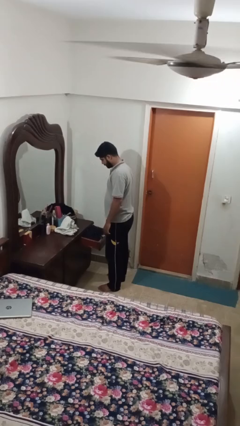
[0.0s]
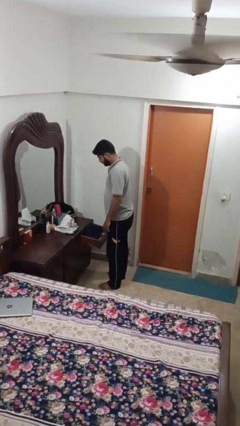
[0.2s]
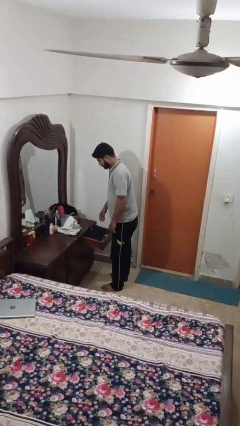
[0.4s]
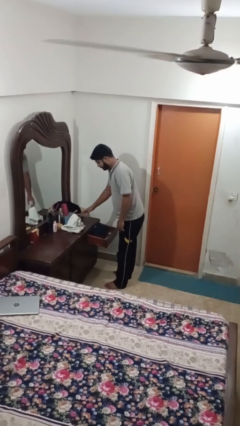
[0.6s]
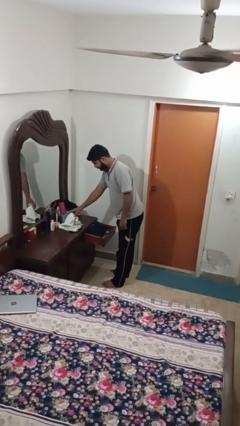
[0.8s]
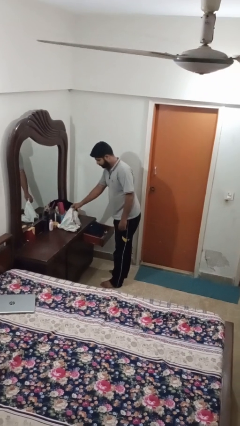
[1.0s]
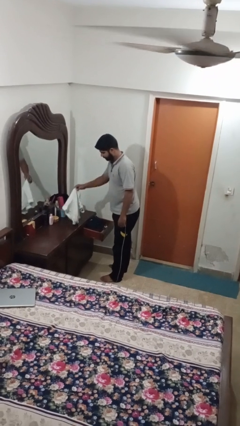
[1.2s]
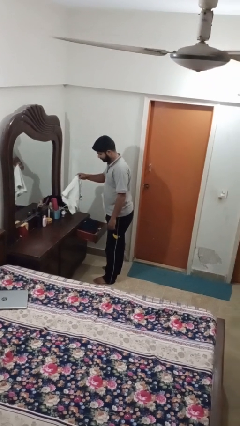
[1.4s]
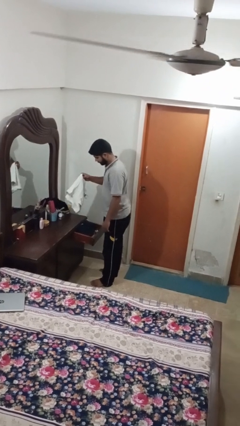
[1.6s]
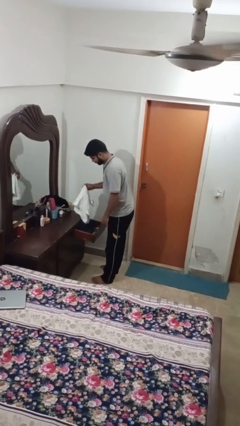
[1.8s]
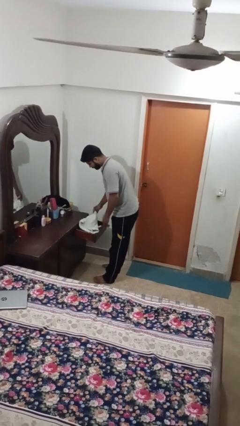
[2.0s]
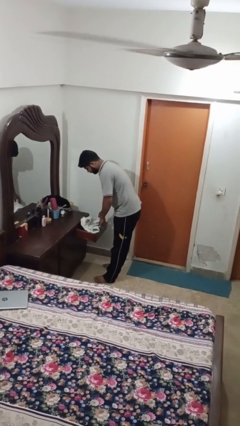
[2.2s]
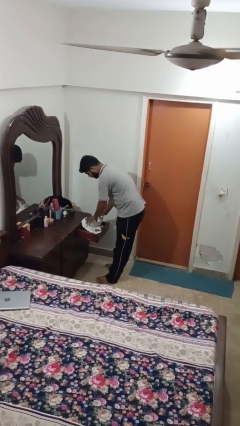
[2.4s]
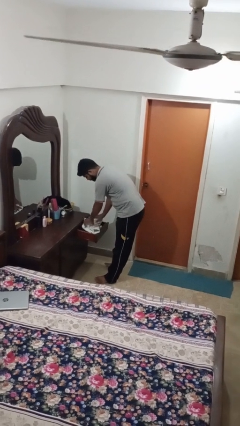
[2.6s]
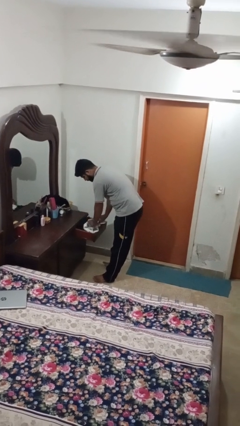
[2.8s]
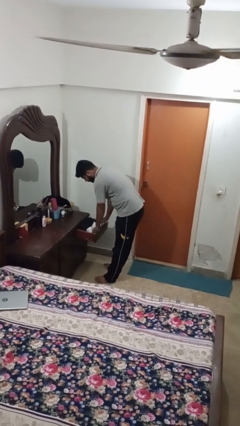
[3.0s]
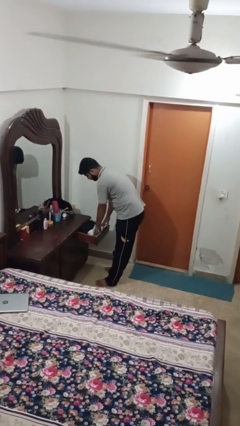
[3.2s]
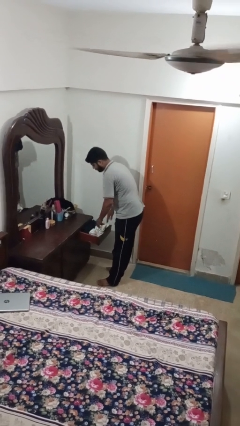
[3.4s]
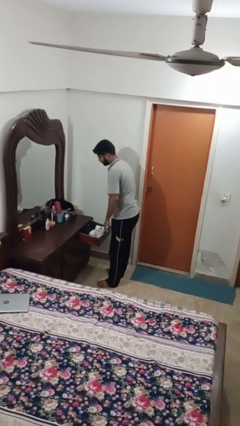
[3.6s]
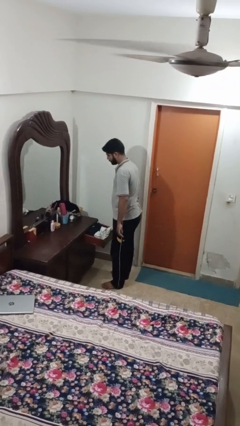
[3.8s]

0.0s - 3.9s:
person puts clothes into dresser

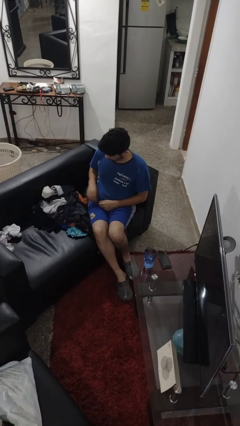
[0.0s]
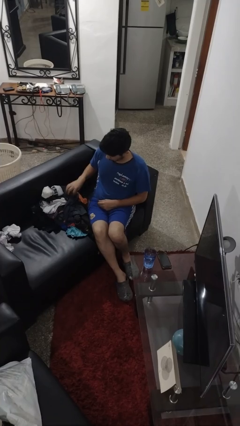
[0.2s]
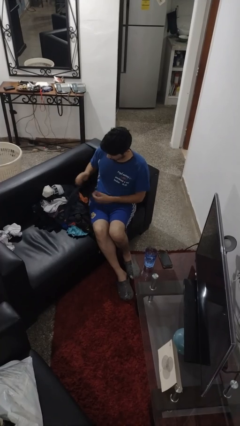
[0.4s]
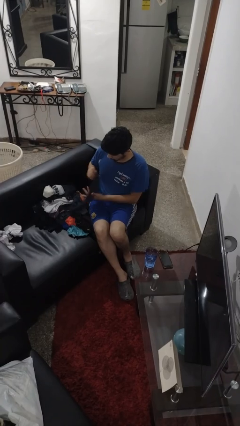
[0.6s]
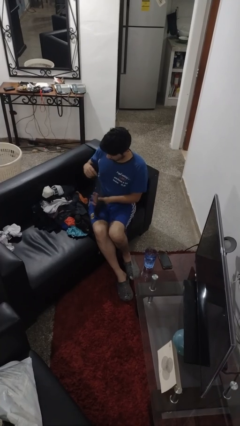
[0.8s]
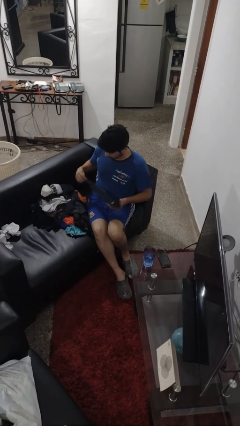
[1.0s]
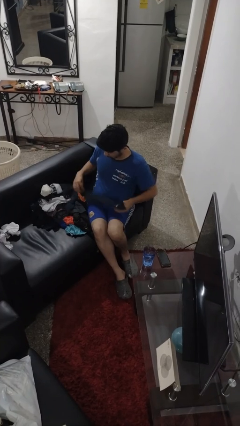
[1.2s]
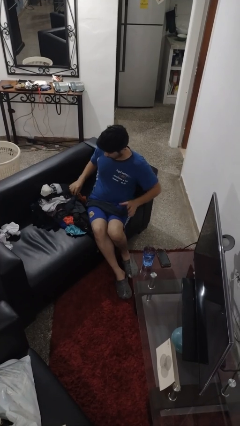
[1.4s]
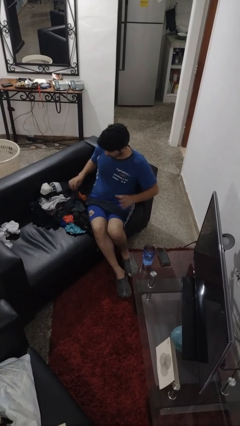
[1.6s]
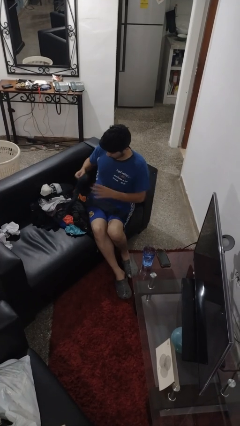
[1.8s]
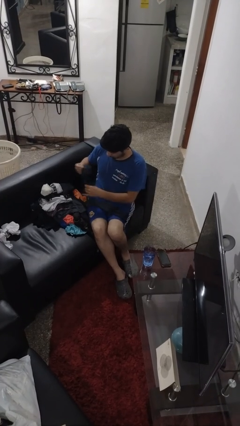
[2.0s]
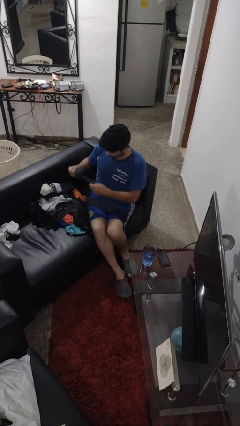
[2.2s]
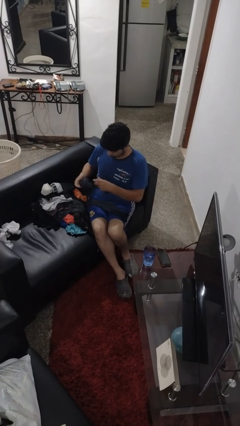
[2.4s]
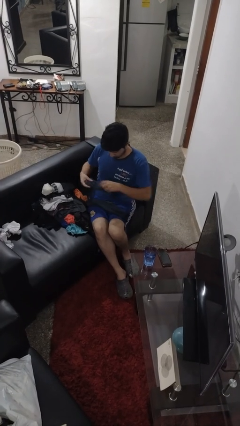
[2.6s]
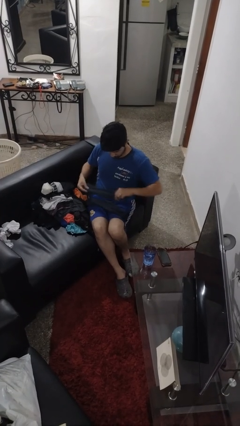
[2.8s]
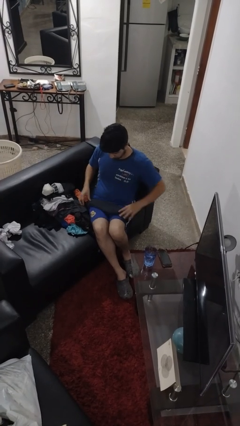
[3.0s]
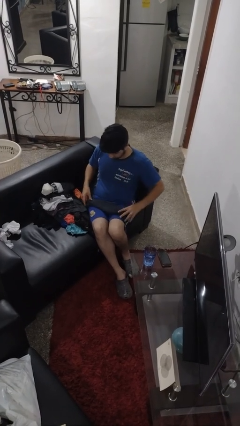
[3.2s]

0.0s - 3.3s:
person folds socks

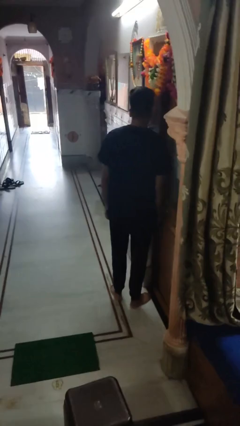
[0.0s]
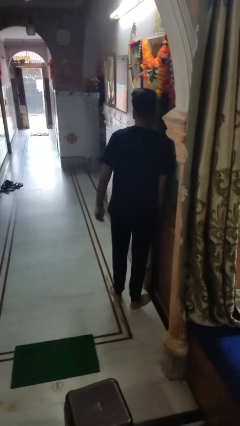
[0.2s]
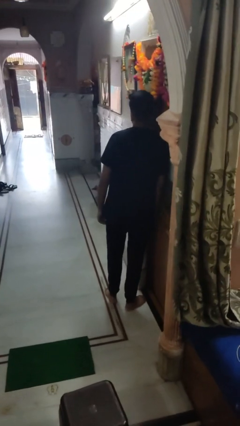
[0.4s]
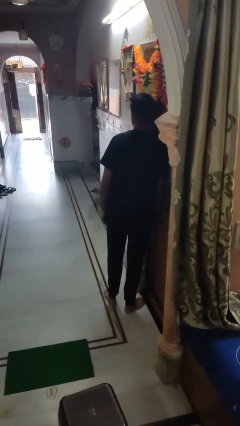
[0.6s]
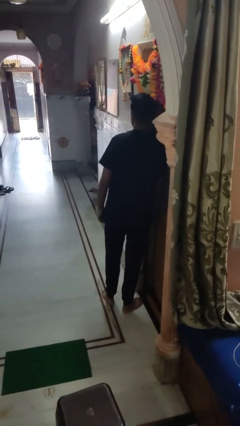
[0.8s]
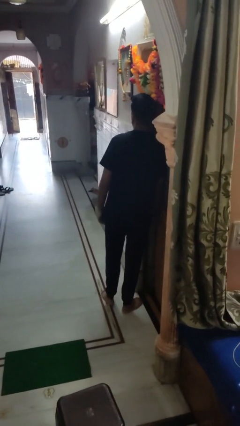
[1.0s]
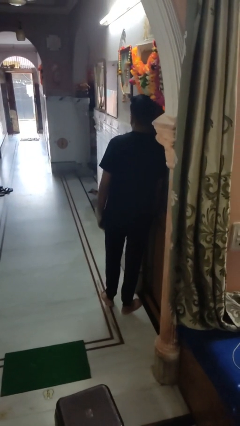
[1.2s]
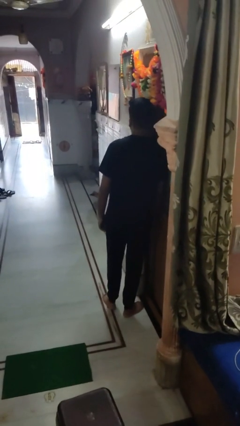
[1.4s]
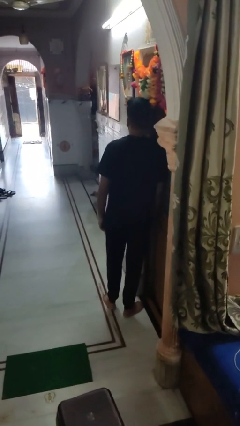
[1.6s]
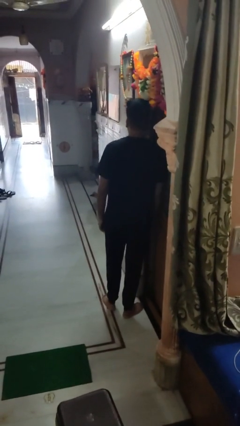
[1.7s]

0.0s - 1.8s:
person bumps into wall

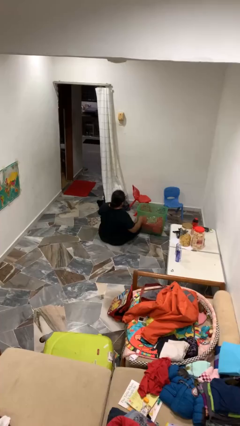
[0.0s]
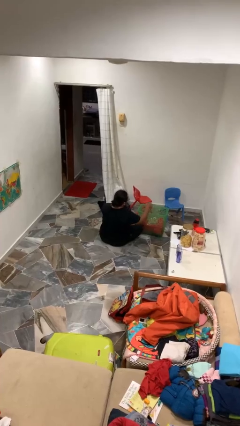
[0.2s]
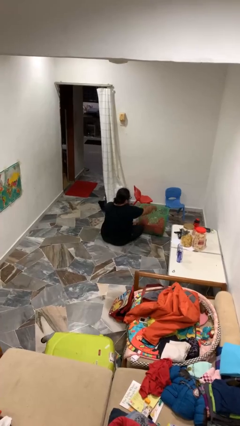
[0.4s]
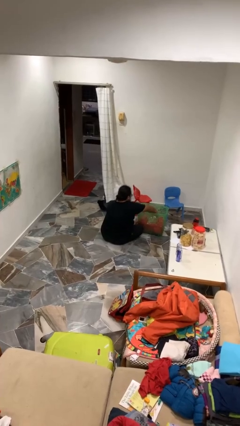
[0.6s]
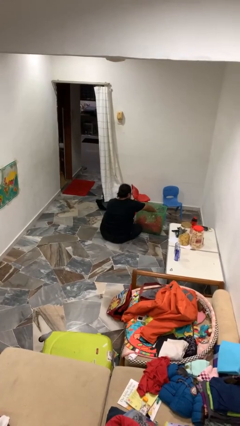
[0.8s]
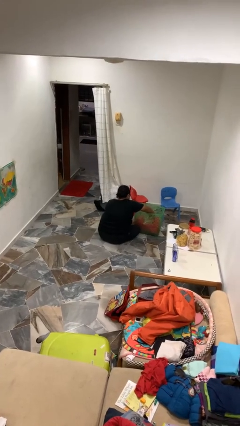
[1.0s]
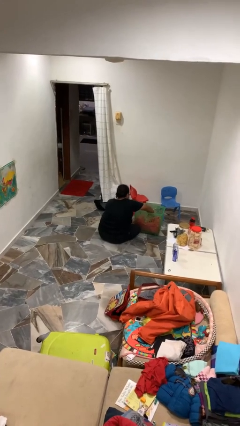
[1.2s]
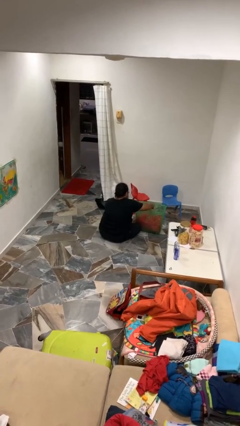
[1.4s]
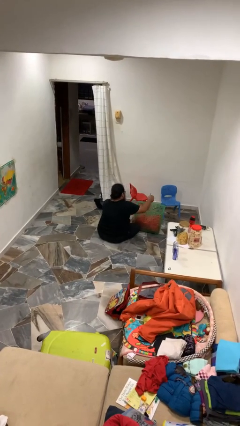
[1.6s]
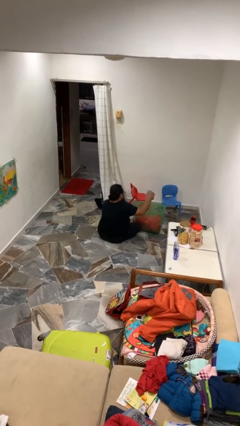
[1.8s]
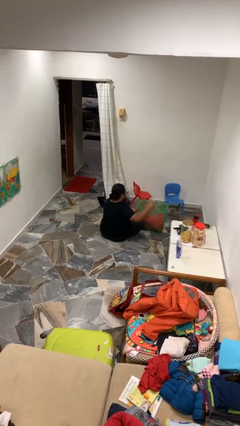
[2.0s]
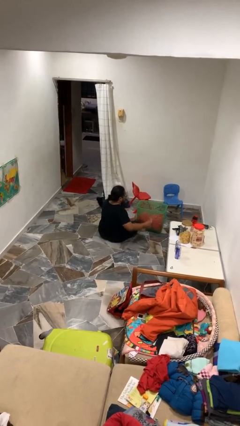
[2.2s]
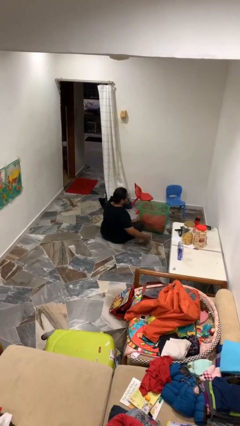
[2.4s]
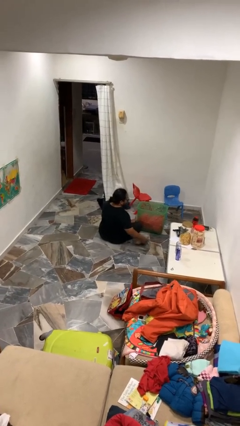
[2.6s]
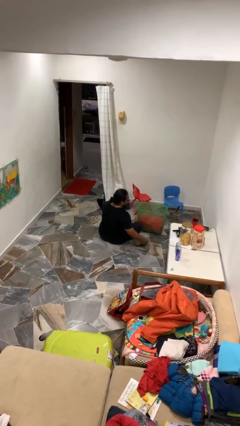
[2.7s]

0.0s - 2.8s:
person takes object from basket

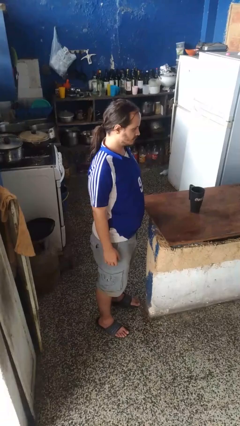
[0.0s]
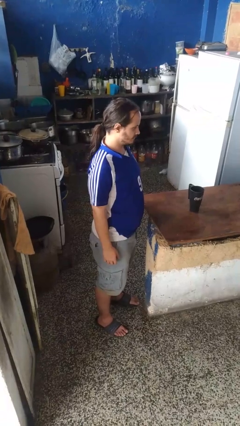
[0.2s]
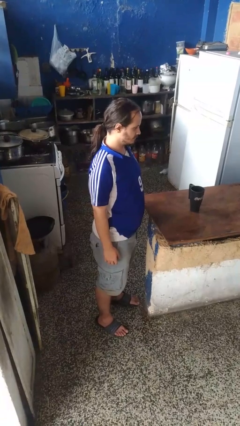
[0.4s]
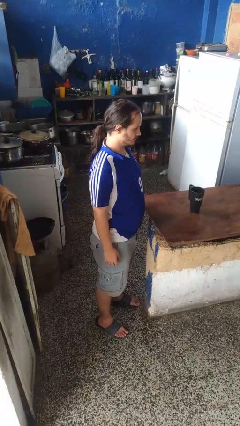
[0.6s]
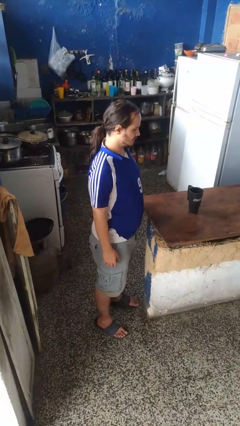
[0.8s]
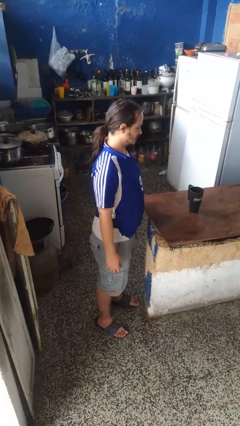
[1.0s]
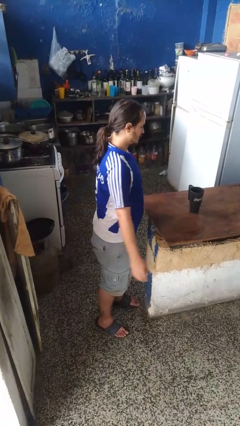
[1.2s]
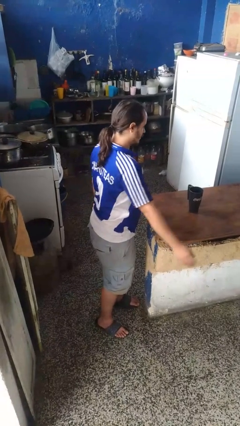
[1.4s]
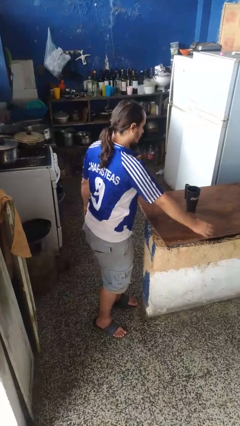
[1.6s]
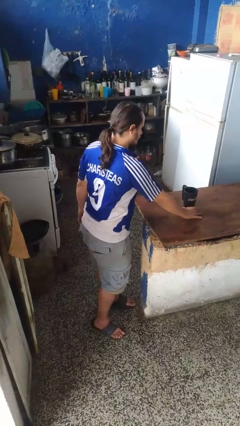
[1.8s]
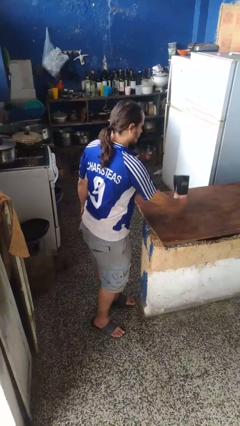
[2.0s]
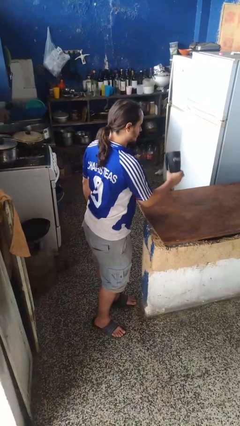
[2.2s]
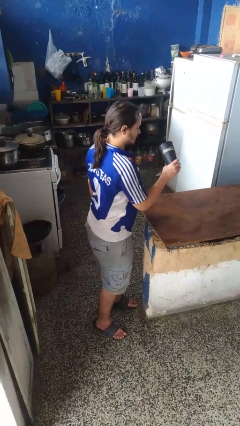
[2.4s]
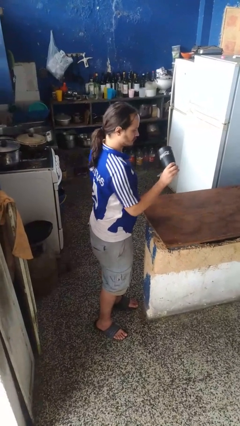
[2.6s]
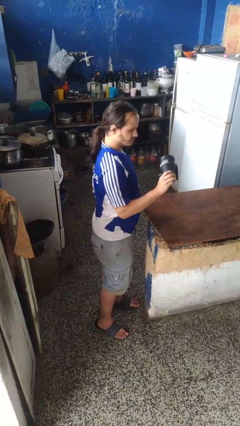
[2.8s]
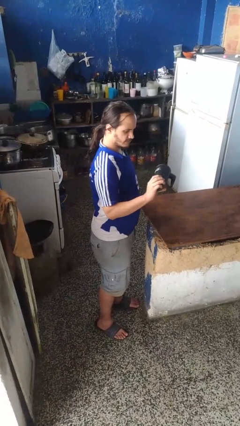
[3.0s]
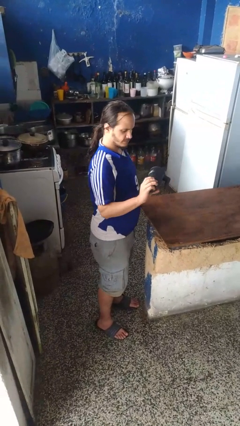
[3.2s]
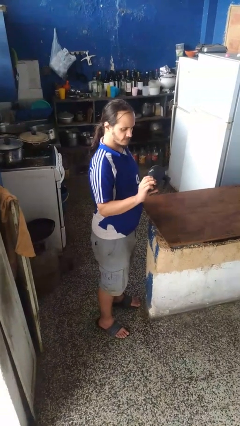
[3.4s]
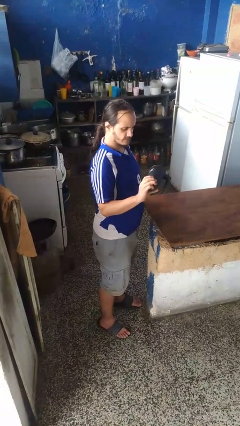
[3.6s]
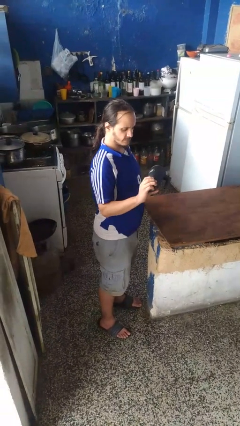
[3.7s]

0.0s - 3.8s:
person picks up object from countertop

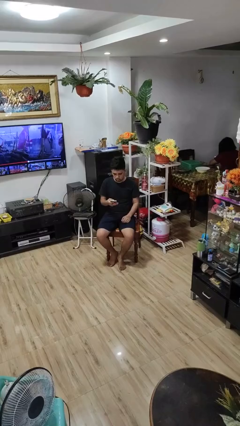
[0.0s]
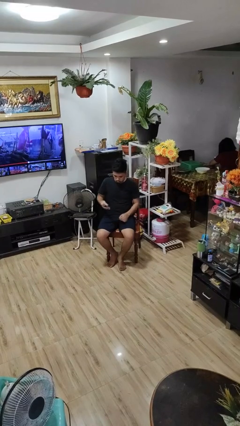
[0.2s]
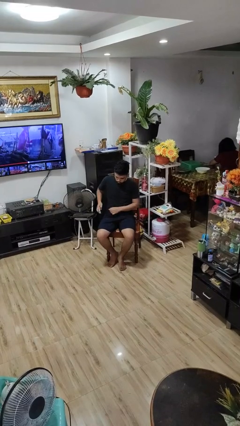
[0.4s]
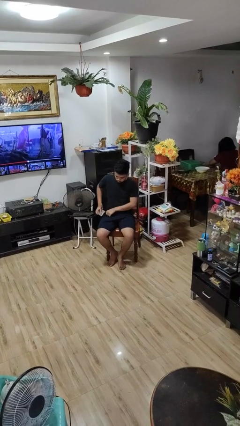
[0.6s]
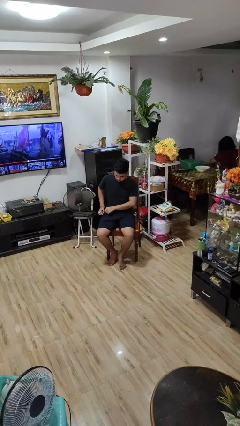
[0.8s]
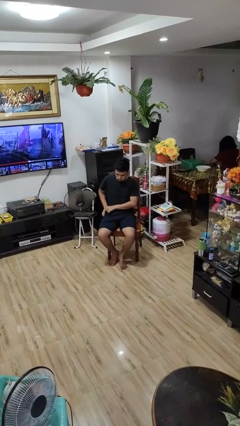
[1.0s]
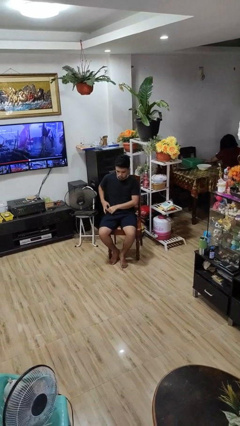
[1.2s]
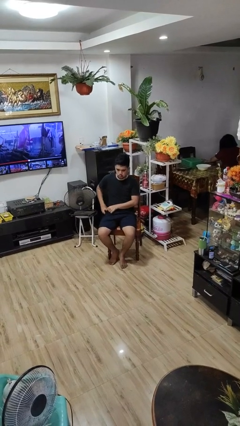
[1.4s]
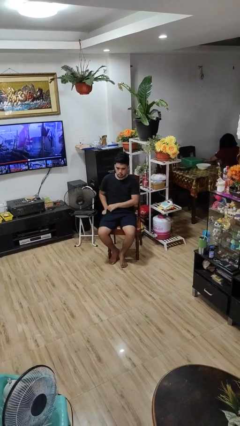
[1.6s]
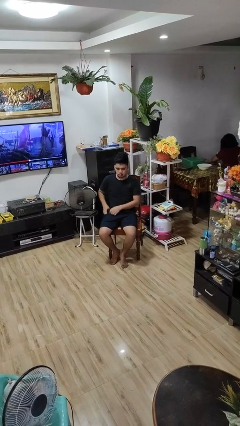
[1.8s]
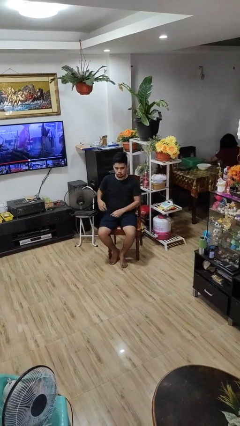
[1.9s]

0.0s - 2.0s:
person puts phone into pocket
